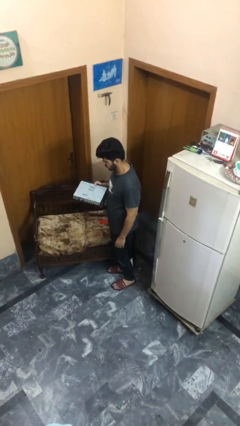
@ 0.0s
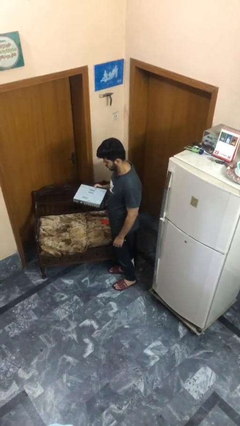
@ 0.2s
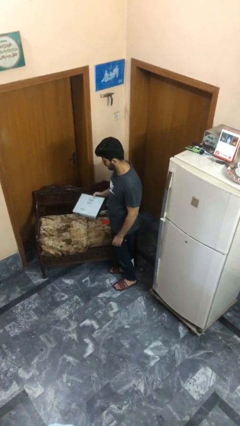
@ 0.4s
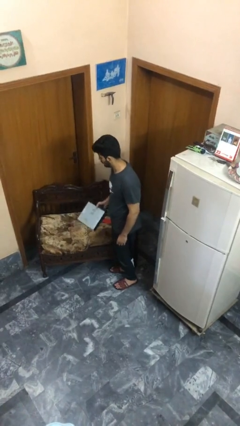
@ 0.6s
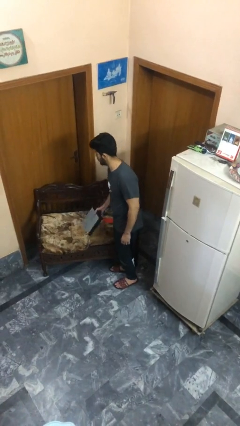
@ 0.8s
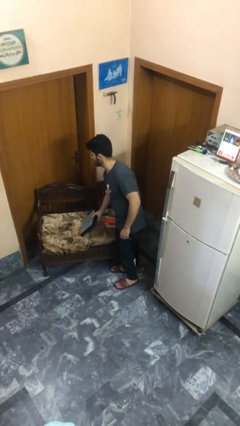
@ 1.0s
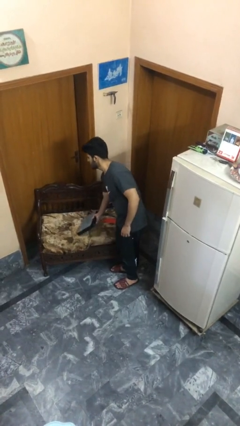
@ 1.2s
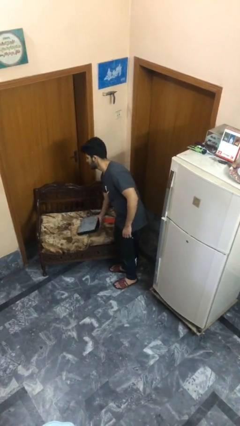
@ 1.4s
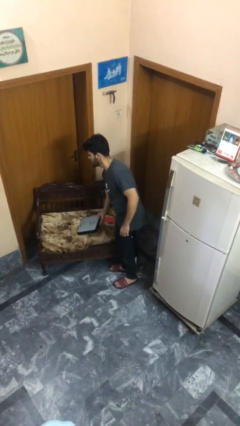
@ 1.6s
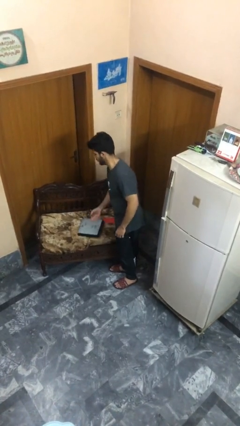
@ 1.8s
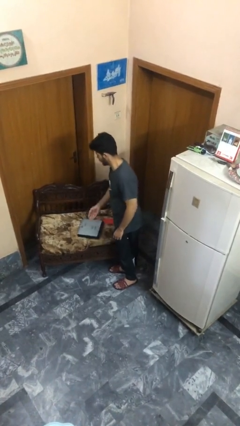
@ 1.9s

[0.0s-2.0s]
person puts down object on couch

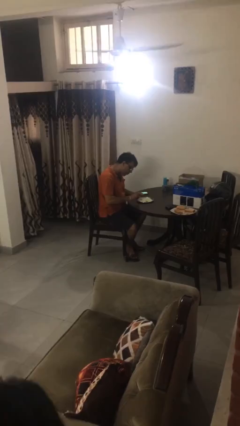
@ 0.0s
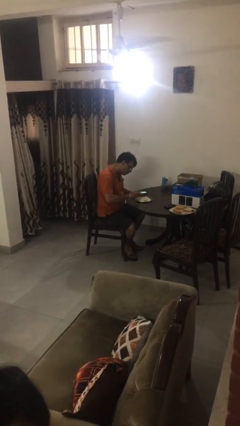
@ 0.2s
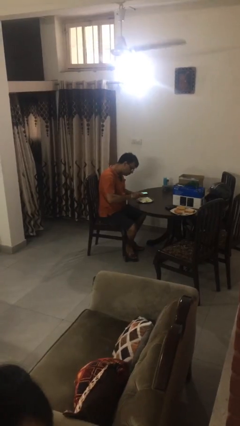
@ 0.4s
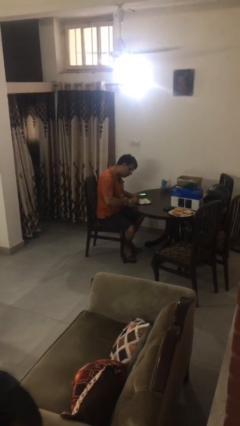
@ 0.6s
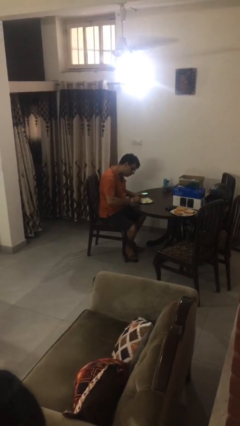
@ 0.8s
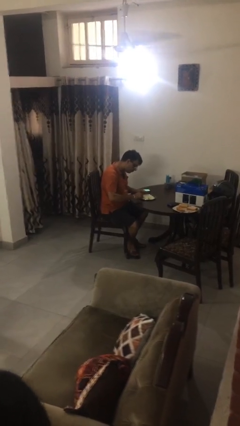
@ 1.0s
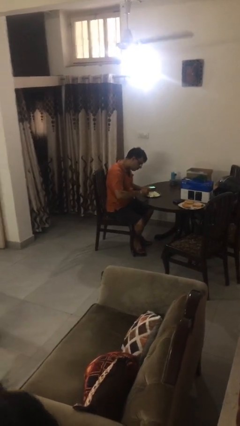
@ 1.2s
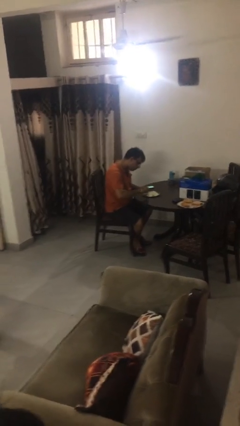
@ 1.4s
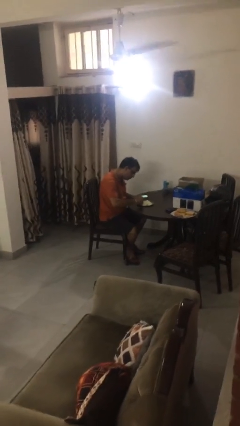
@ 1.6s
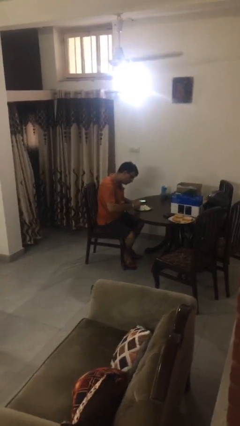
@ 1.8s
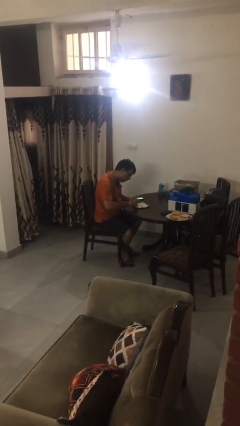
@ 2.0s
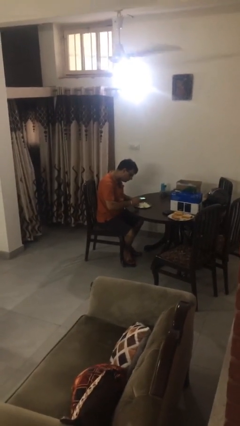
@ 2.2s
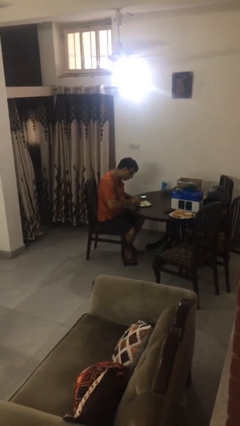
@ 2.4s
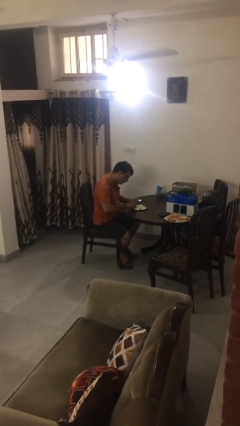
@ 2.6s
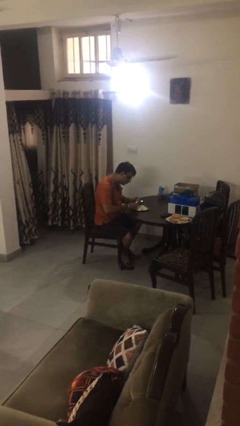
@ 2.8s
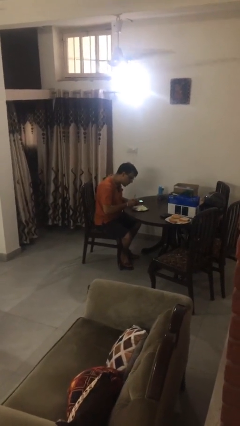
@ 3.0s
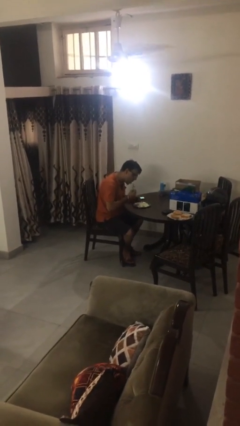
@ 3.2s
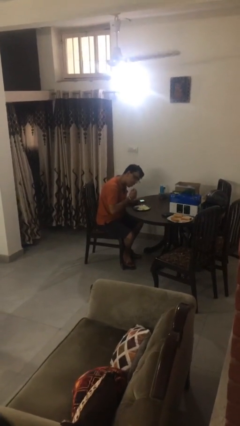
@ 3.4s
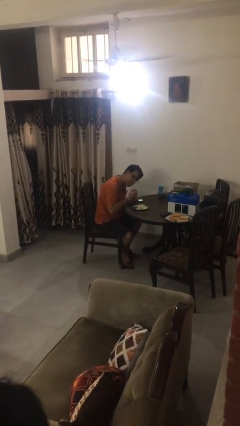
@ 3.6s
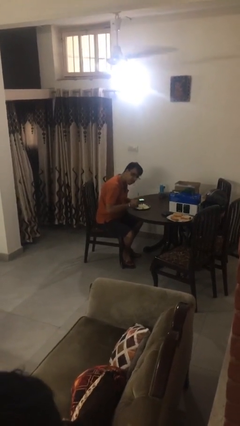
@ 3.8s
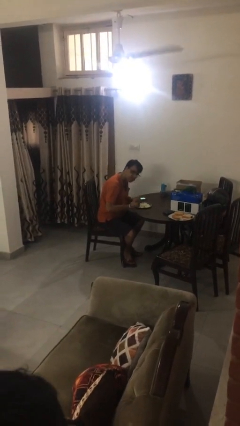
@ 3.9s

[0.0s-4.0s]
person eats with utensil

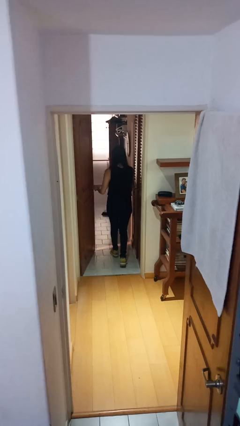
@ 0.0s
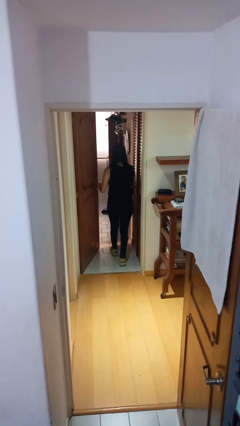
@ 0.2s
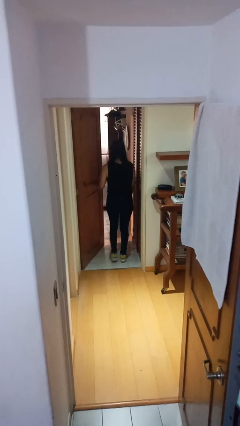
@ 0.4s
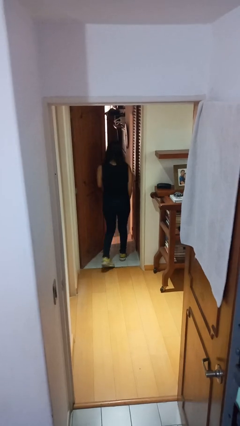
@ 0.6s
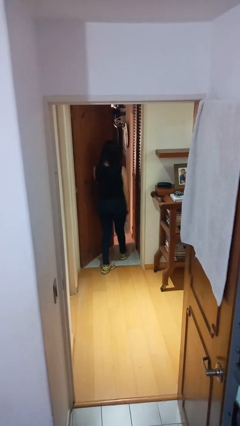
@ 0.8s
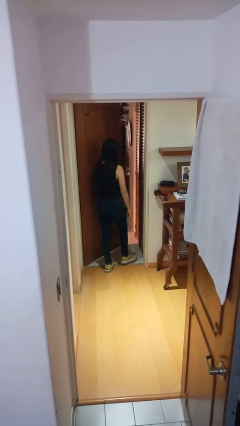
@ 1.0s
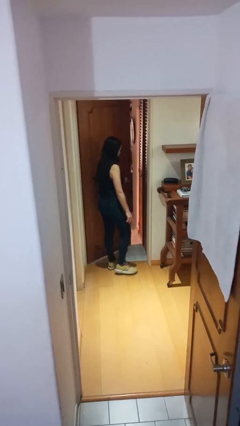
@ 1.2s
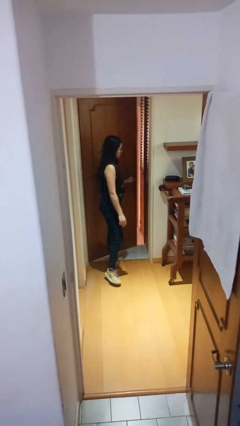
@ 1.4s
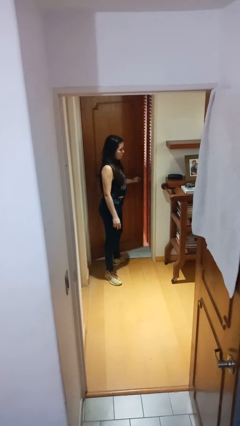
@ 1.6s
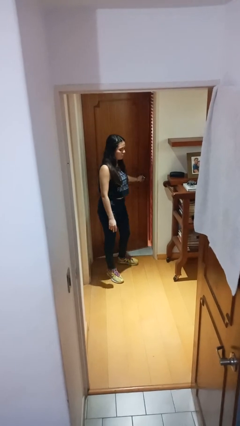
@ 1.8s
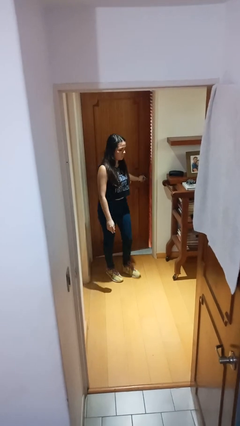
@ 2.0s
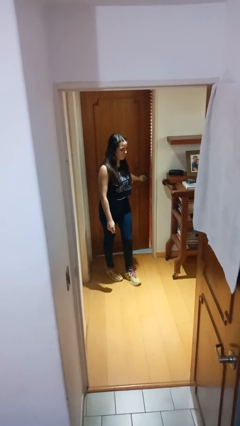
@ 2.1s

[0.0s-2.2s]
person closes facility door

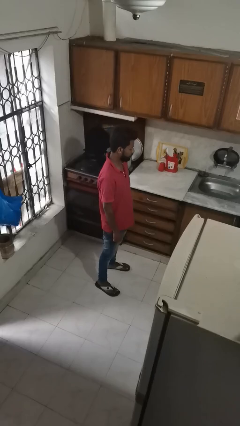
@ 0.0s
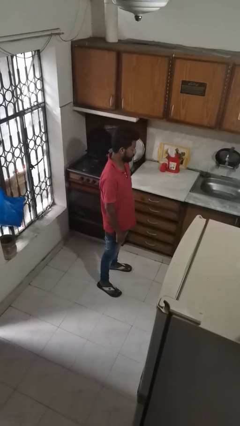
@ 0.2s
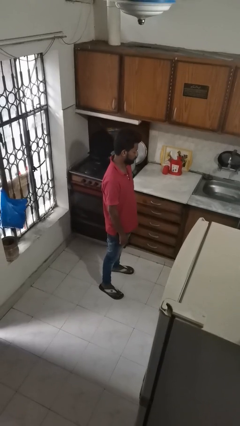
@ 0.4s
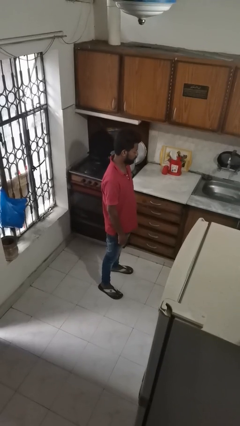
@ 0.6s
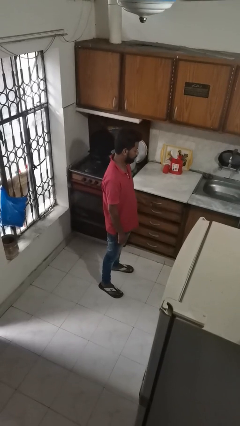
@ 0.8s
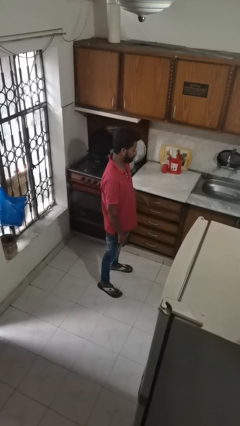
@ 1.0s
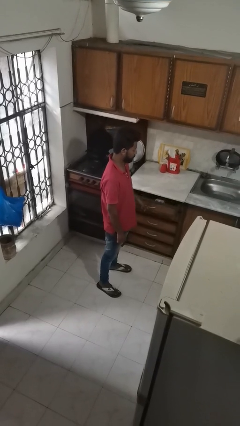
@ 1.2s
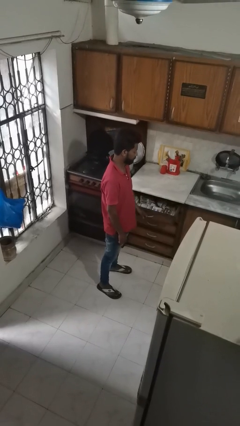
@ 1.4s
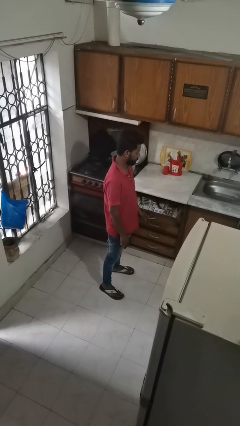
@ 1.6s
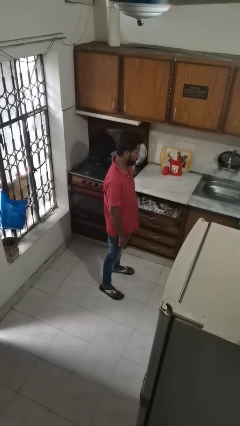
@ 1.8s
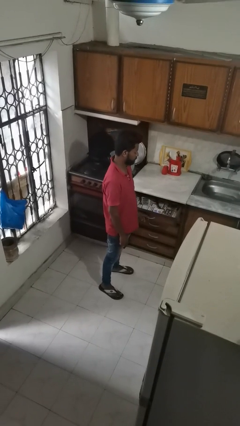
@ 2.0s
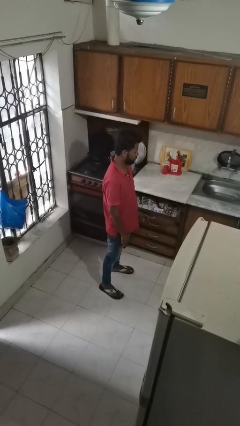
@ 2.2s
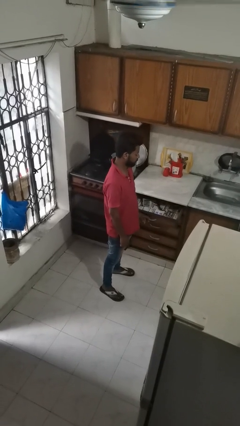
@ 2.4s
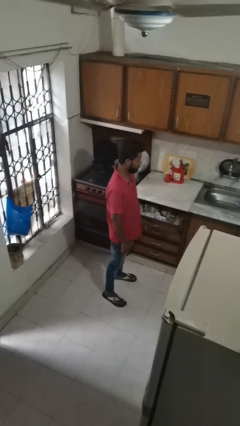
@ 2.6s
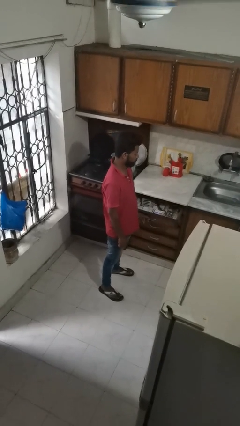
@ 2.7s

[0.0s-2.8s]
person opens kitchen drawer

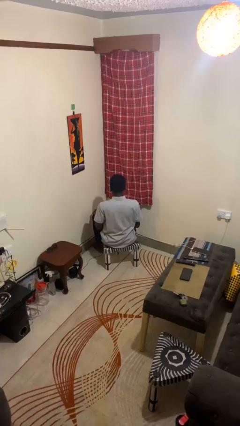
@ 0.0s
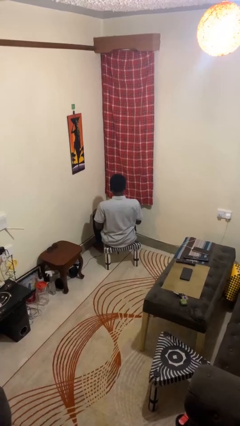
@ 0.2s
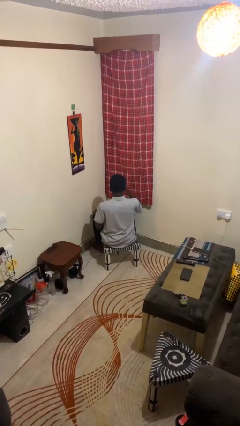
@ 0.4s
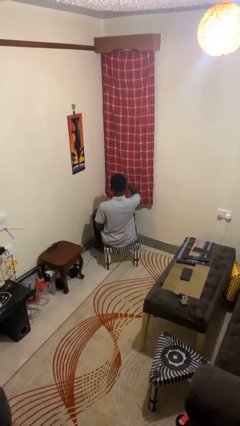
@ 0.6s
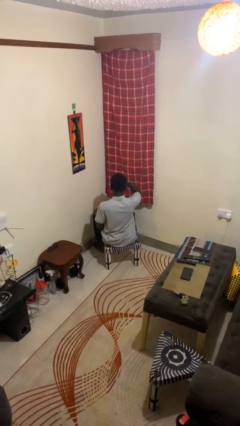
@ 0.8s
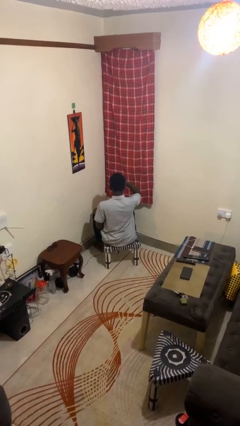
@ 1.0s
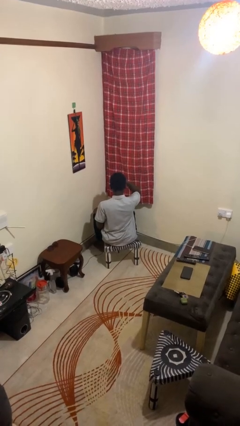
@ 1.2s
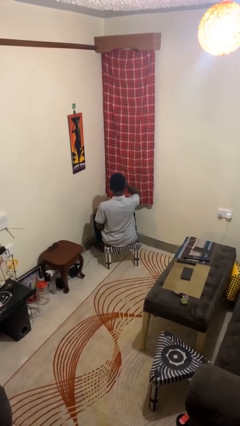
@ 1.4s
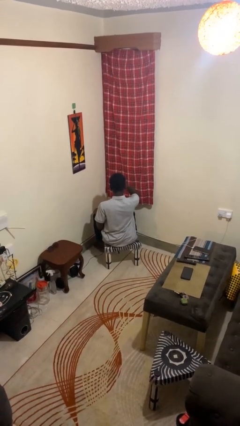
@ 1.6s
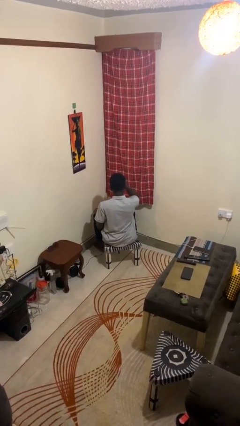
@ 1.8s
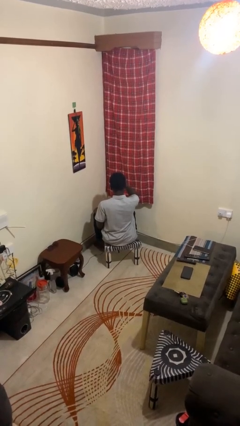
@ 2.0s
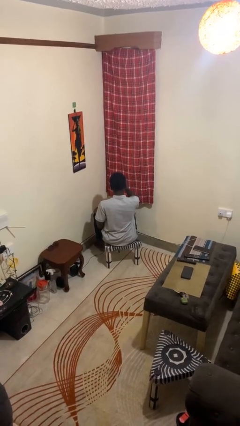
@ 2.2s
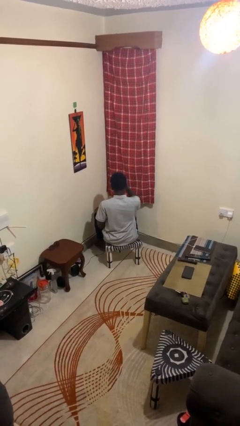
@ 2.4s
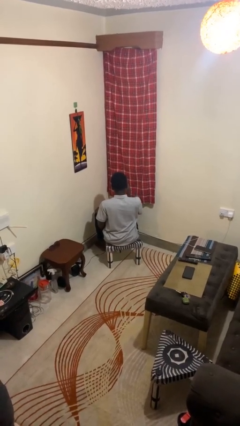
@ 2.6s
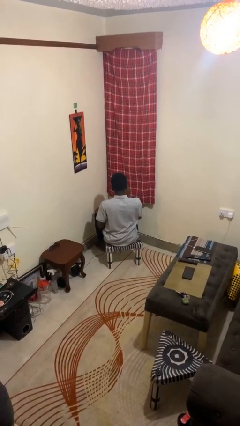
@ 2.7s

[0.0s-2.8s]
person scratches face

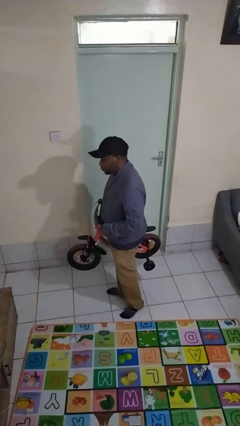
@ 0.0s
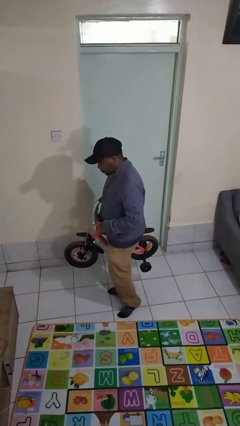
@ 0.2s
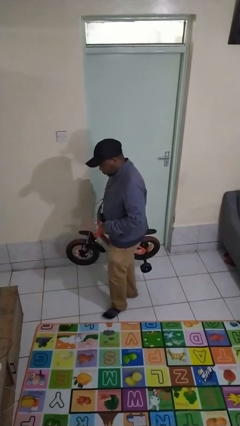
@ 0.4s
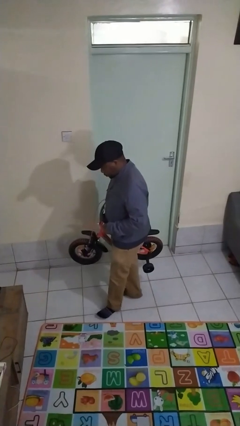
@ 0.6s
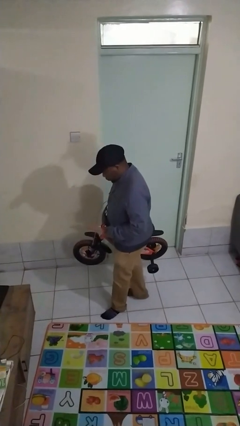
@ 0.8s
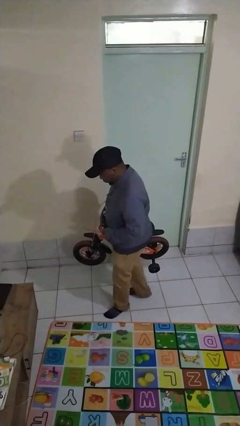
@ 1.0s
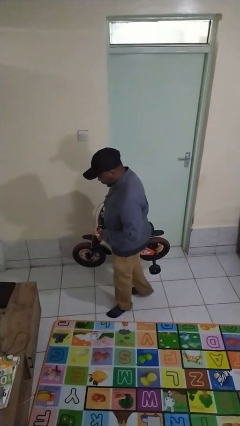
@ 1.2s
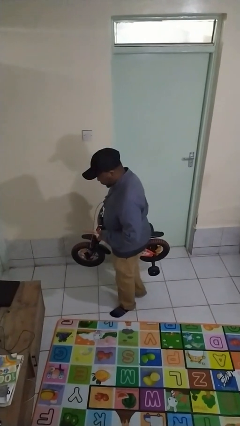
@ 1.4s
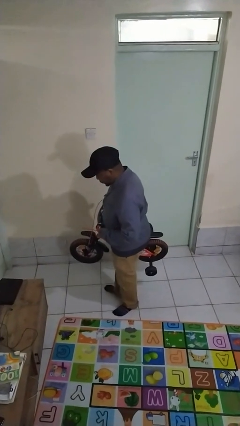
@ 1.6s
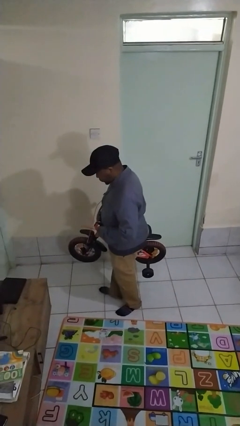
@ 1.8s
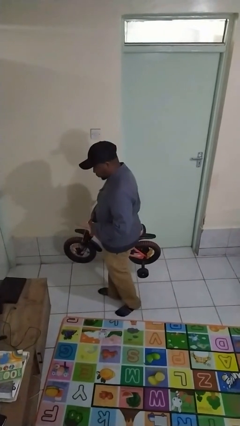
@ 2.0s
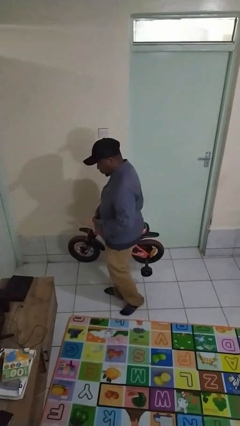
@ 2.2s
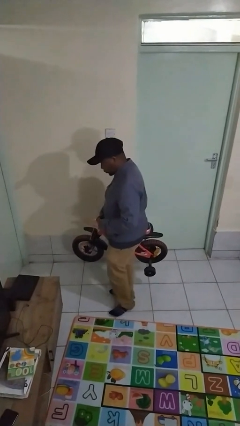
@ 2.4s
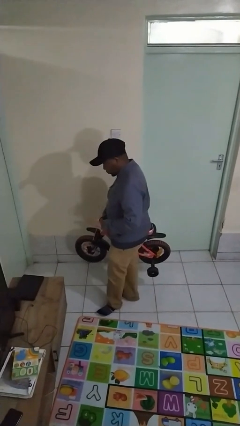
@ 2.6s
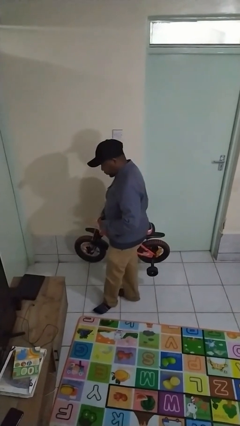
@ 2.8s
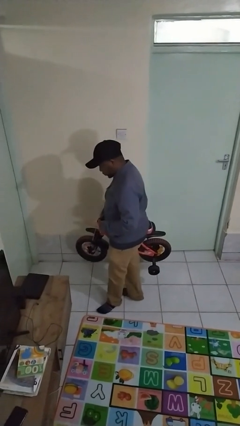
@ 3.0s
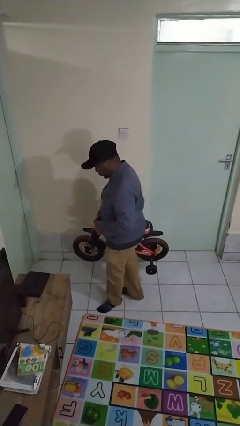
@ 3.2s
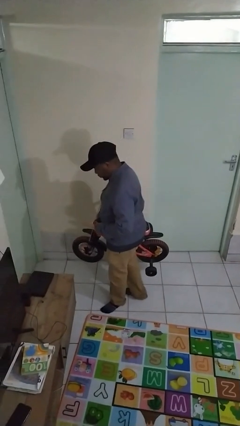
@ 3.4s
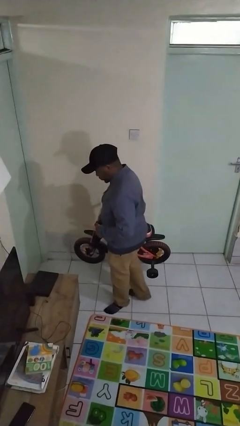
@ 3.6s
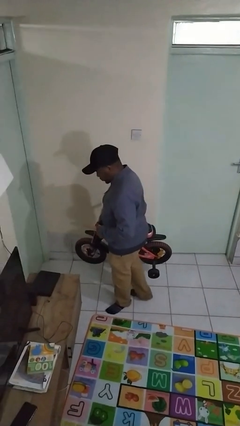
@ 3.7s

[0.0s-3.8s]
person carries bicycle
